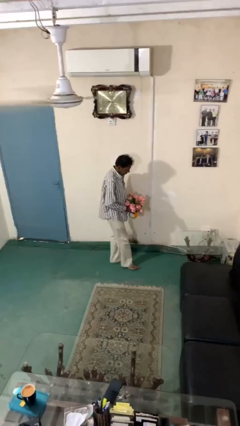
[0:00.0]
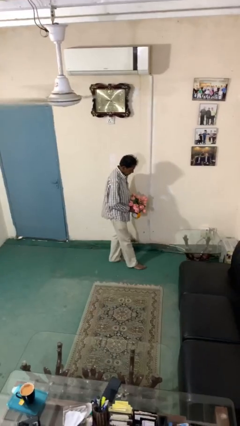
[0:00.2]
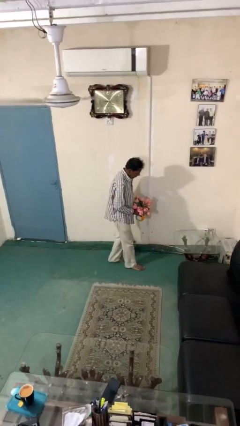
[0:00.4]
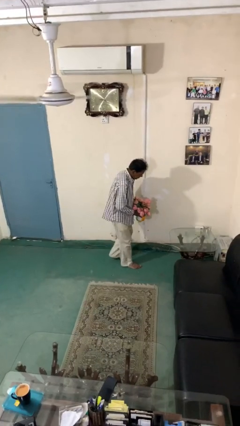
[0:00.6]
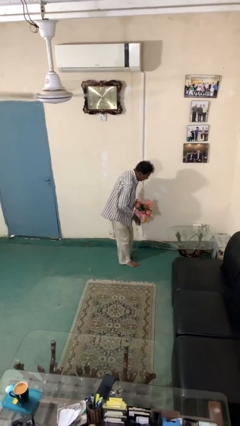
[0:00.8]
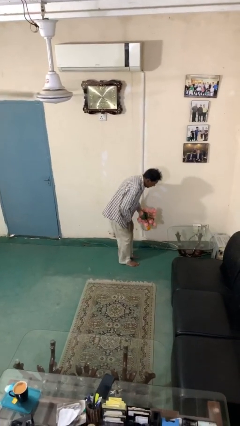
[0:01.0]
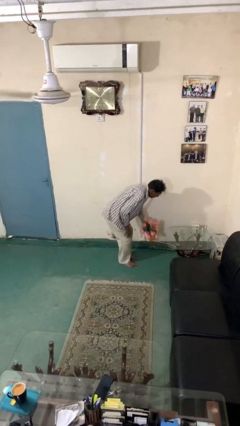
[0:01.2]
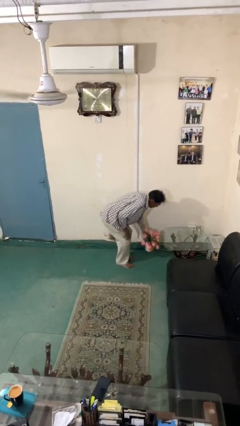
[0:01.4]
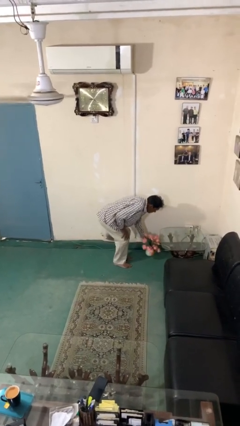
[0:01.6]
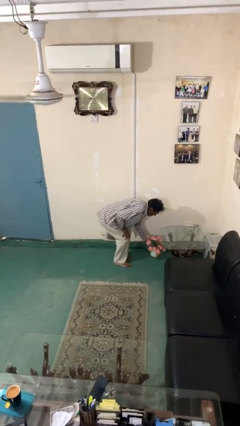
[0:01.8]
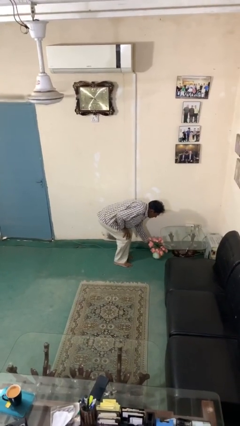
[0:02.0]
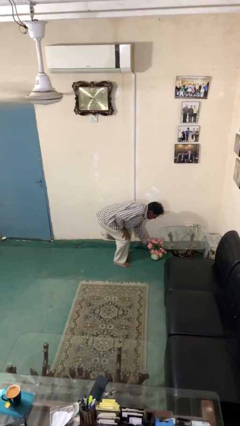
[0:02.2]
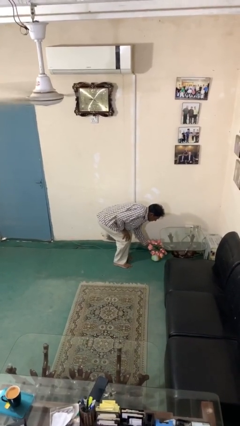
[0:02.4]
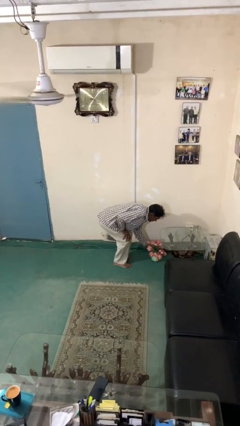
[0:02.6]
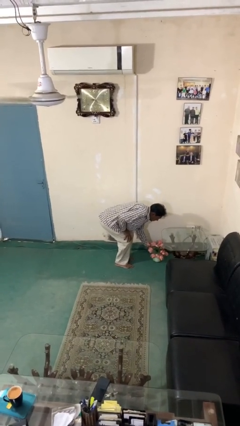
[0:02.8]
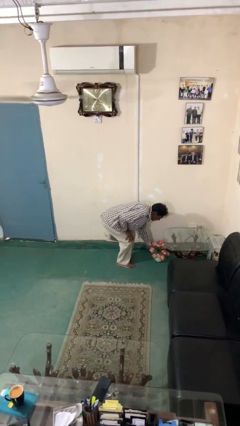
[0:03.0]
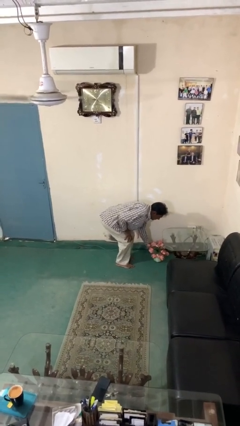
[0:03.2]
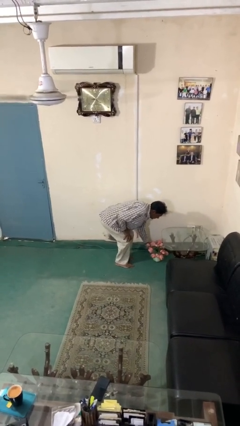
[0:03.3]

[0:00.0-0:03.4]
person puts down object on floor

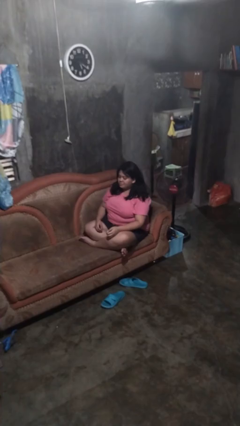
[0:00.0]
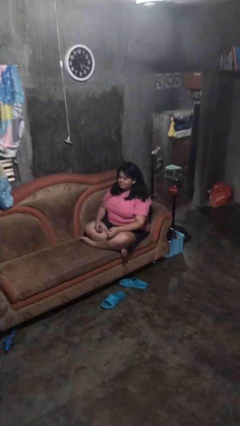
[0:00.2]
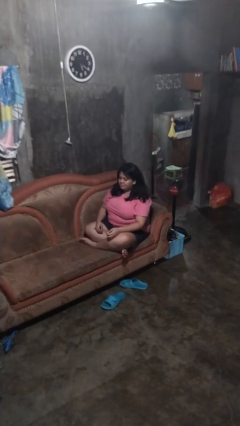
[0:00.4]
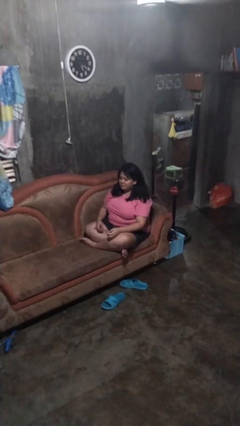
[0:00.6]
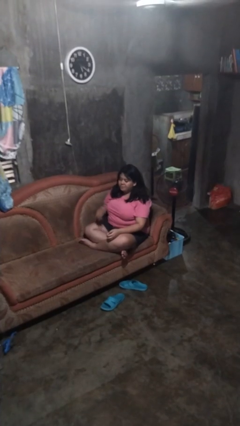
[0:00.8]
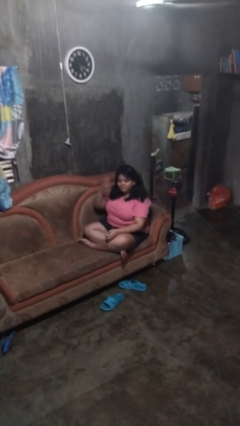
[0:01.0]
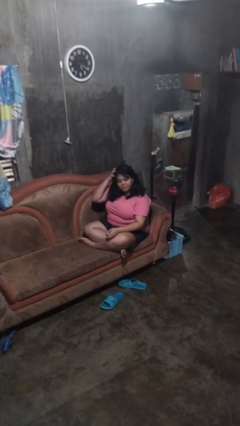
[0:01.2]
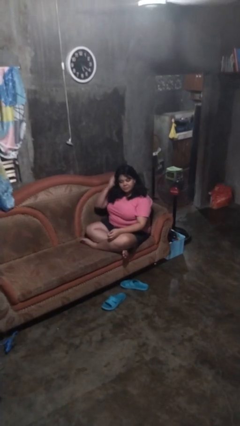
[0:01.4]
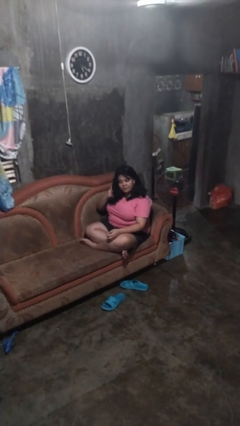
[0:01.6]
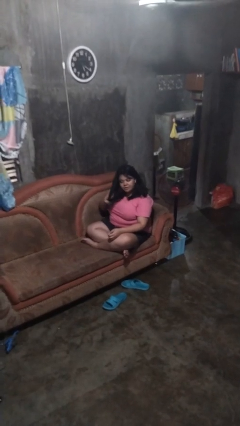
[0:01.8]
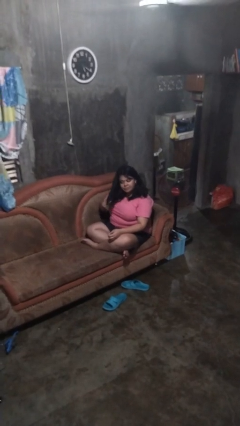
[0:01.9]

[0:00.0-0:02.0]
person strokes hair

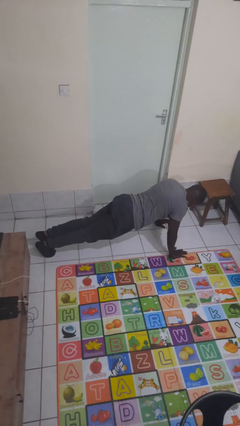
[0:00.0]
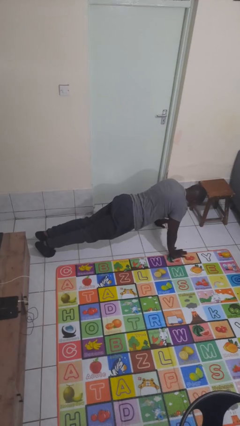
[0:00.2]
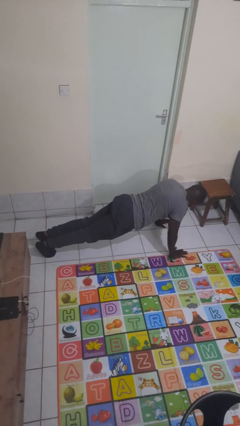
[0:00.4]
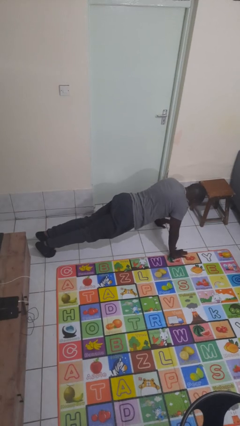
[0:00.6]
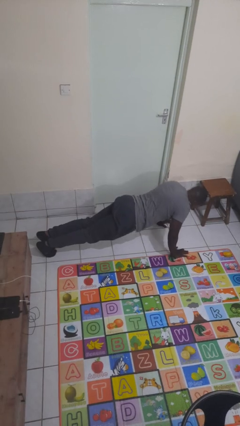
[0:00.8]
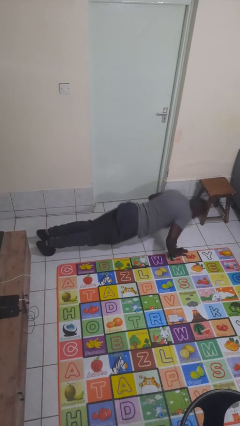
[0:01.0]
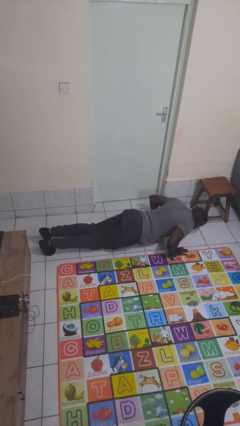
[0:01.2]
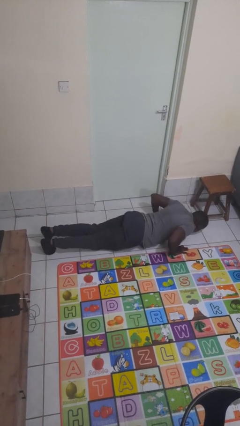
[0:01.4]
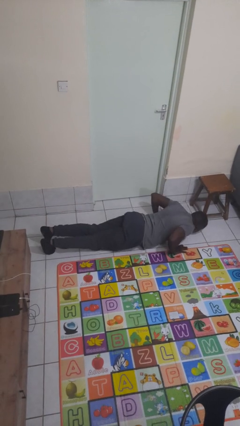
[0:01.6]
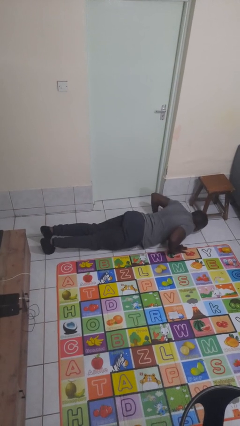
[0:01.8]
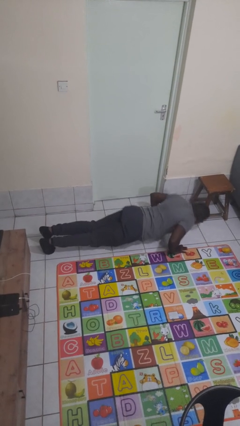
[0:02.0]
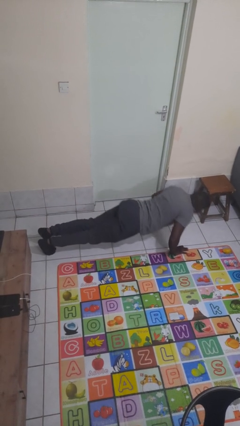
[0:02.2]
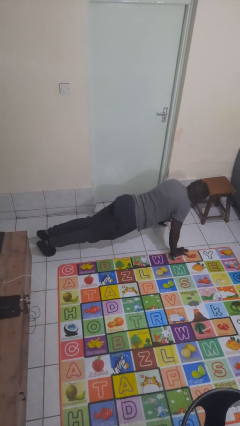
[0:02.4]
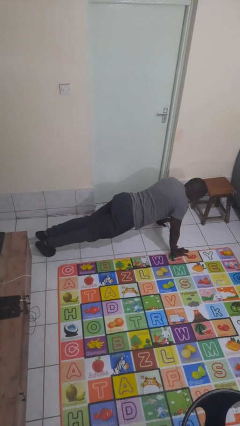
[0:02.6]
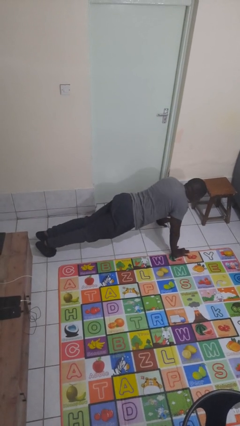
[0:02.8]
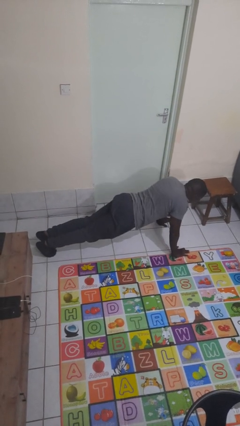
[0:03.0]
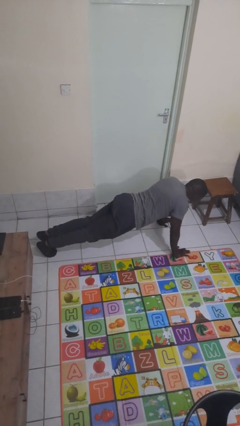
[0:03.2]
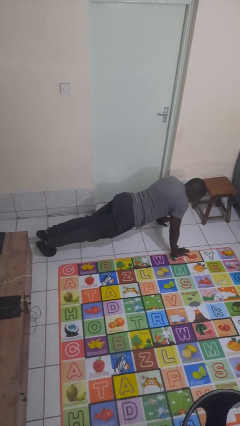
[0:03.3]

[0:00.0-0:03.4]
person exercises with pushup

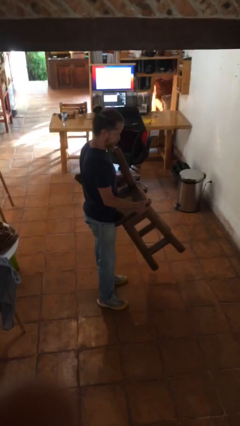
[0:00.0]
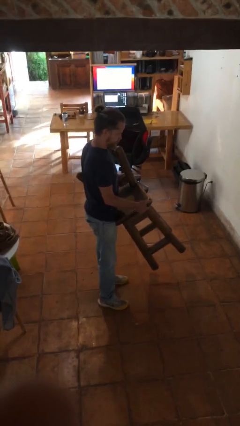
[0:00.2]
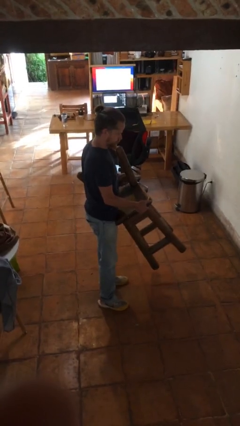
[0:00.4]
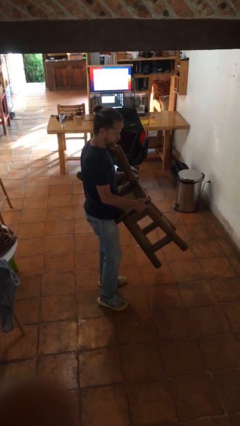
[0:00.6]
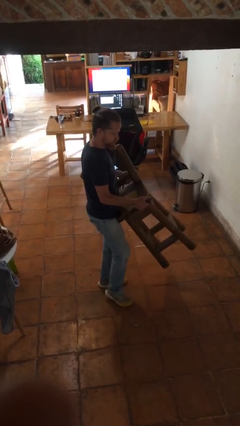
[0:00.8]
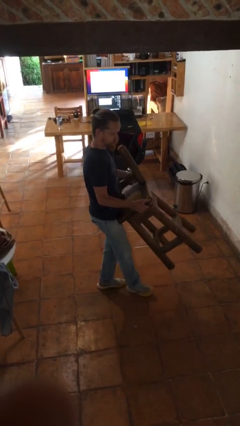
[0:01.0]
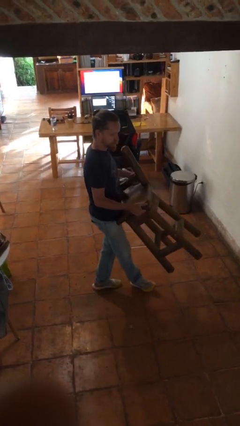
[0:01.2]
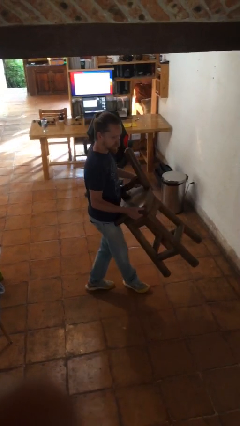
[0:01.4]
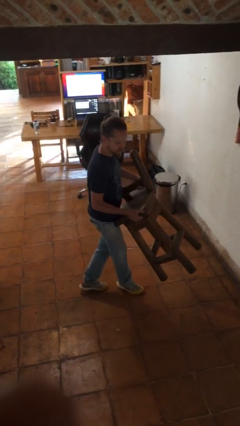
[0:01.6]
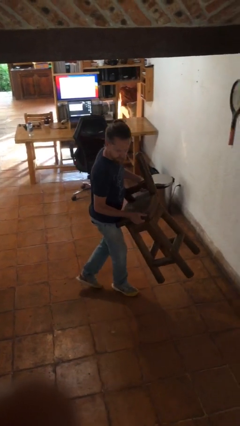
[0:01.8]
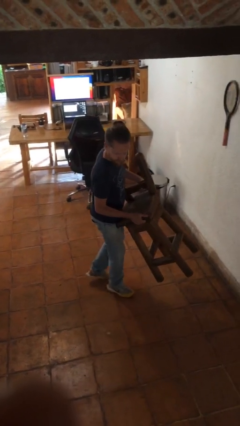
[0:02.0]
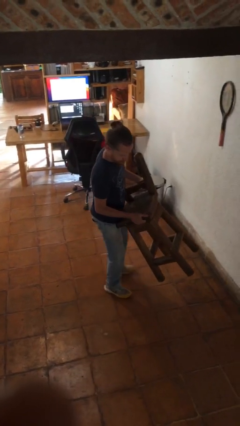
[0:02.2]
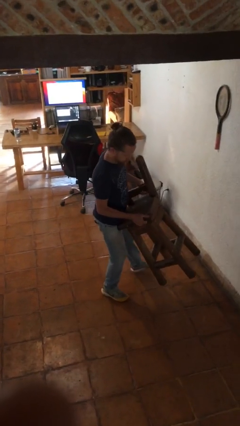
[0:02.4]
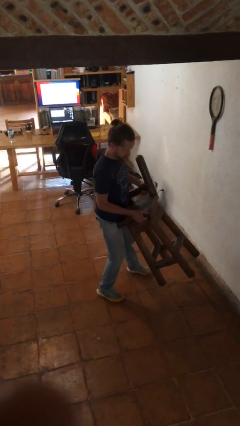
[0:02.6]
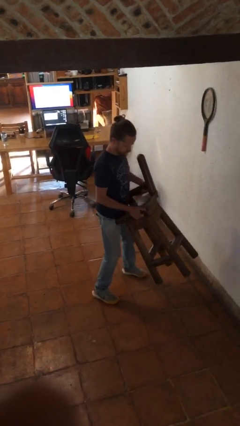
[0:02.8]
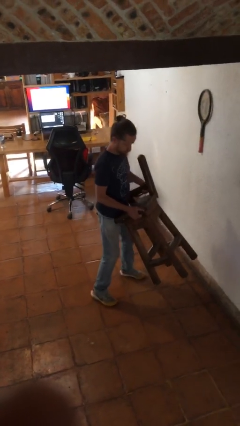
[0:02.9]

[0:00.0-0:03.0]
person carries furniture

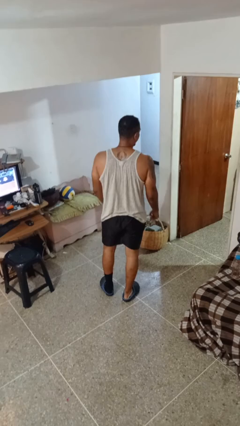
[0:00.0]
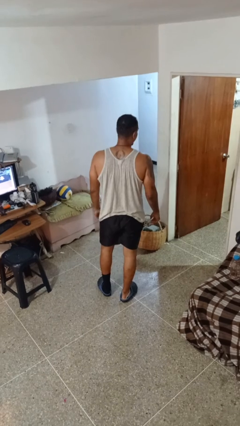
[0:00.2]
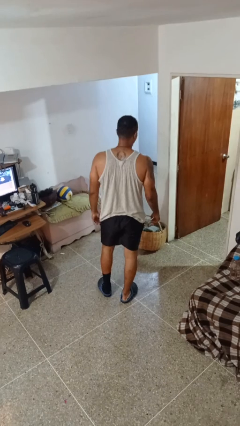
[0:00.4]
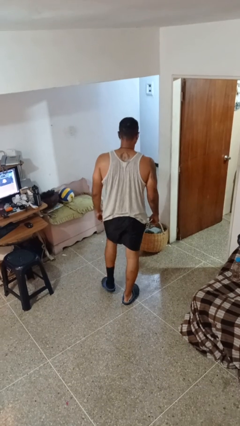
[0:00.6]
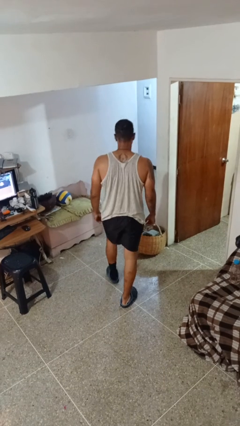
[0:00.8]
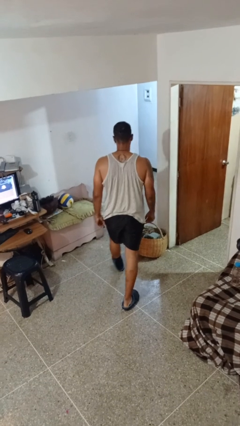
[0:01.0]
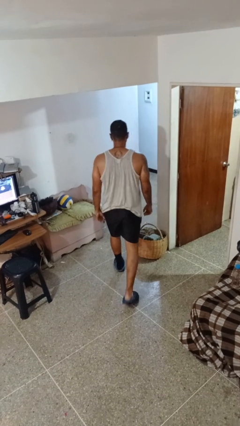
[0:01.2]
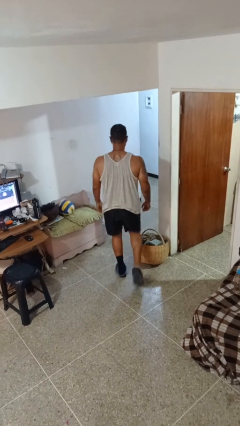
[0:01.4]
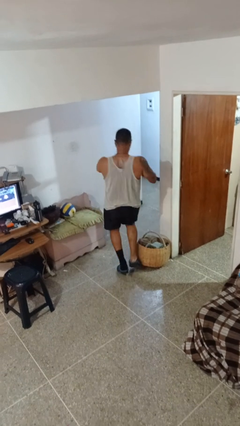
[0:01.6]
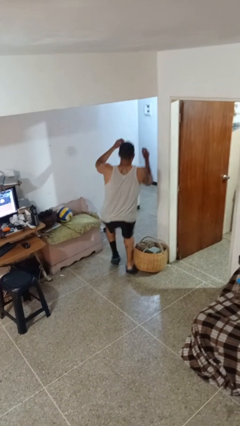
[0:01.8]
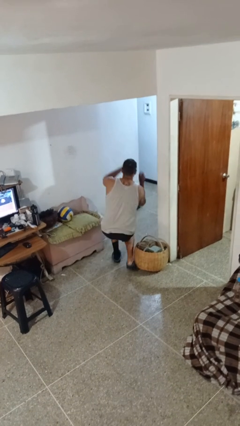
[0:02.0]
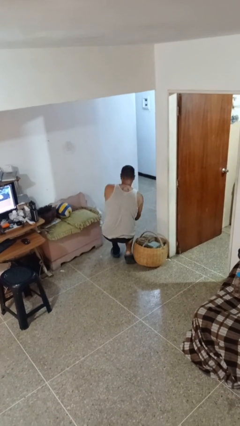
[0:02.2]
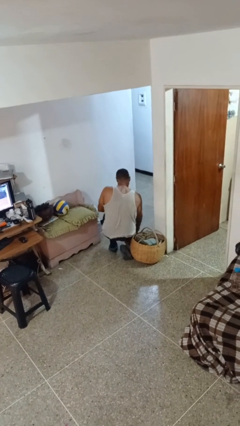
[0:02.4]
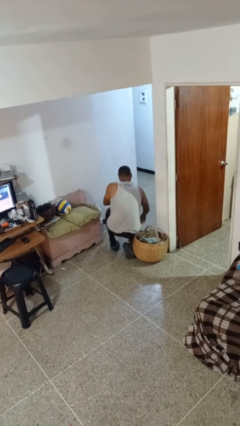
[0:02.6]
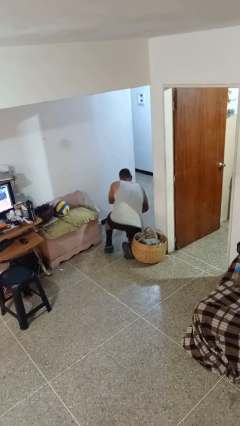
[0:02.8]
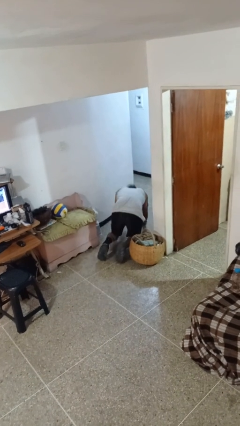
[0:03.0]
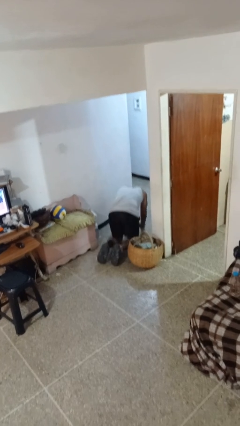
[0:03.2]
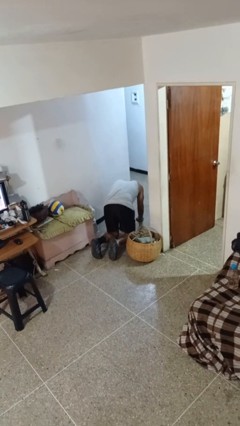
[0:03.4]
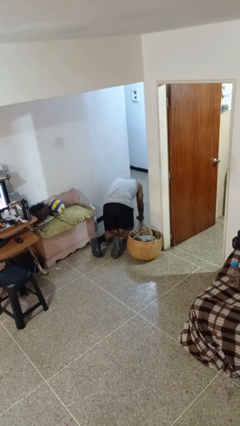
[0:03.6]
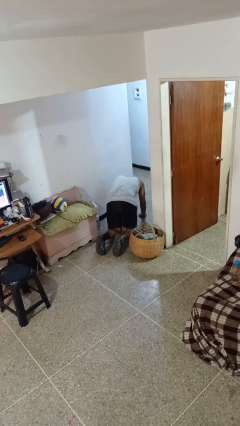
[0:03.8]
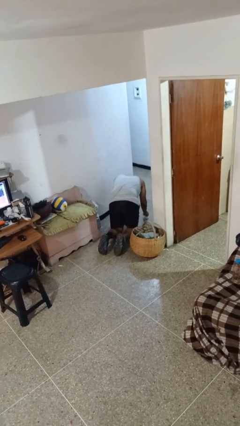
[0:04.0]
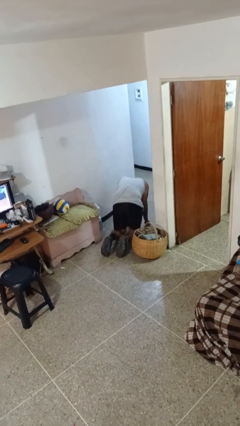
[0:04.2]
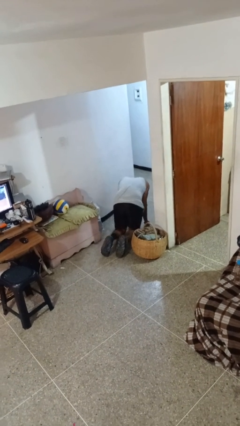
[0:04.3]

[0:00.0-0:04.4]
person trips on object on floor

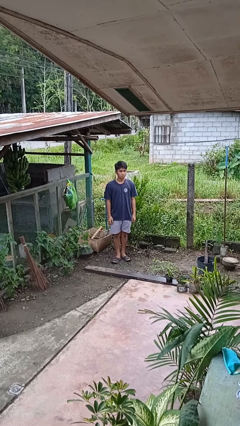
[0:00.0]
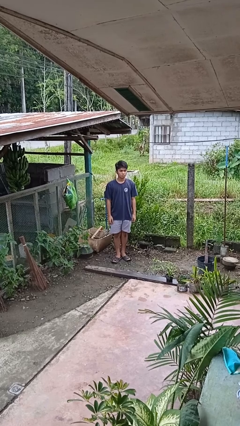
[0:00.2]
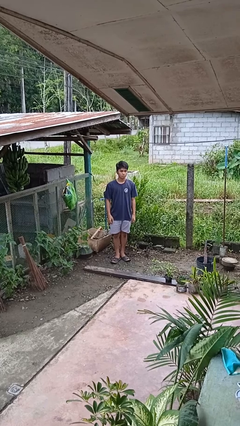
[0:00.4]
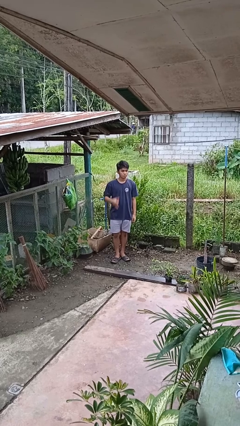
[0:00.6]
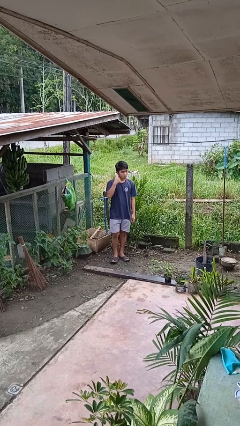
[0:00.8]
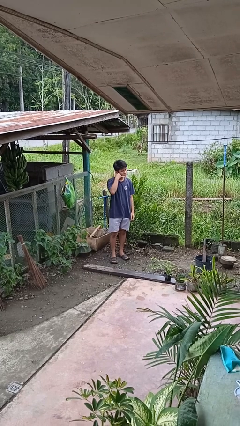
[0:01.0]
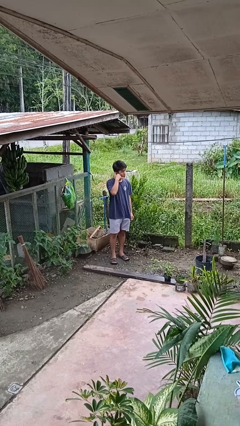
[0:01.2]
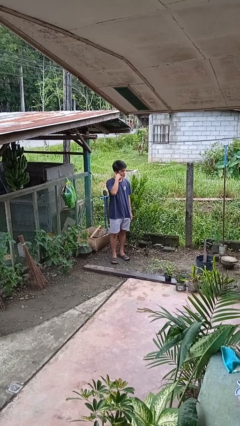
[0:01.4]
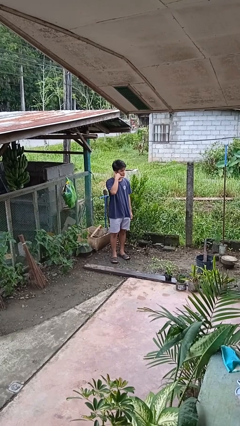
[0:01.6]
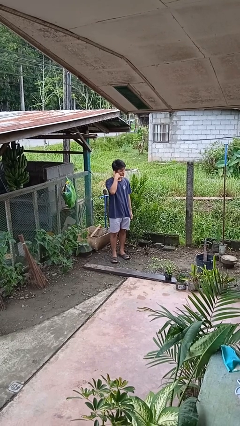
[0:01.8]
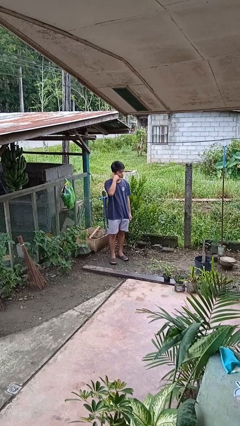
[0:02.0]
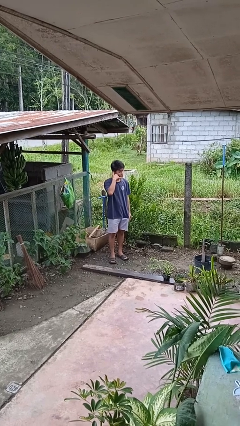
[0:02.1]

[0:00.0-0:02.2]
person gestures call me
